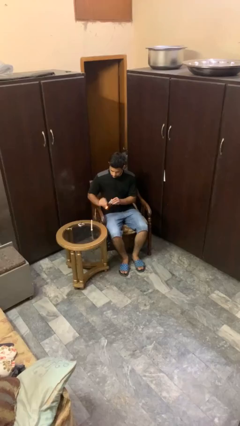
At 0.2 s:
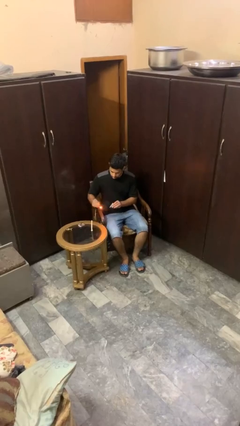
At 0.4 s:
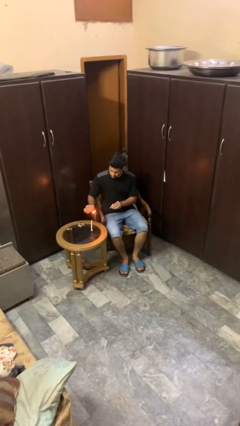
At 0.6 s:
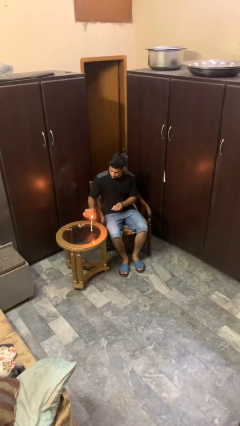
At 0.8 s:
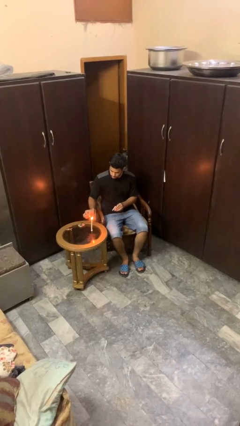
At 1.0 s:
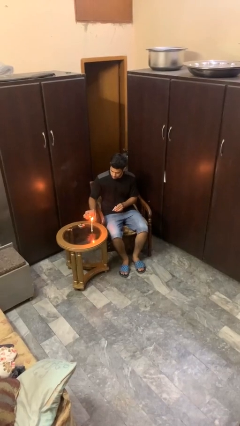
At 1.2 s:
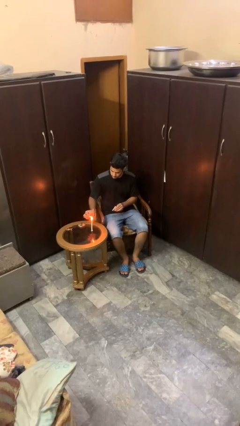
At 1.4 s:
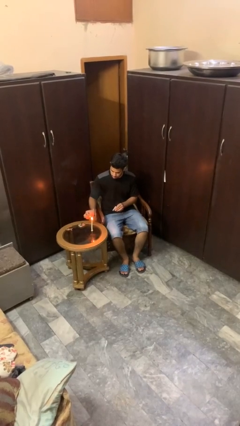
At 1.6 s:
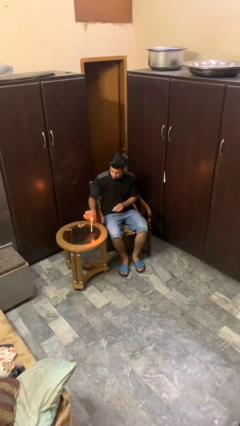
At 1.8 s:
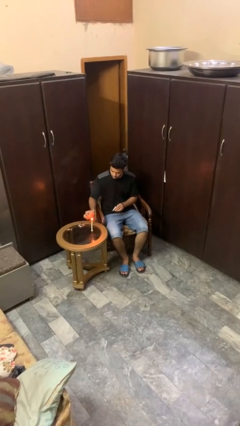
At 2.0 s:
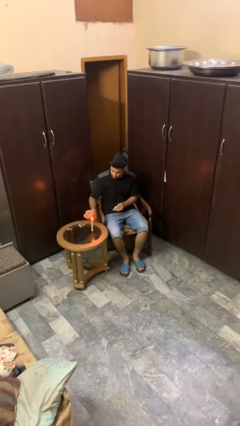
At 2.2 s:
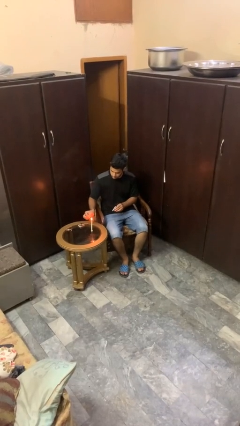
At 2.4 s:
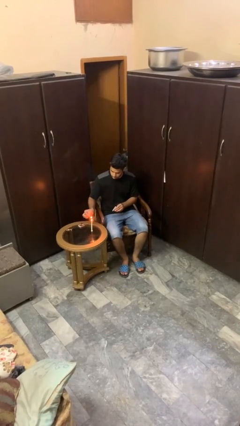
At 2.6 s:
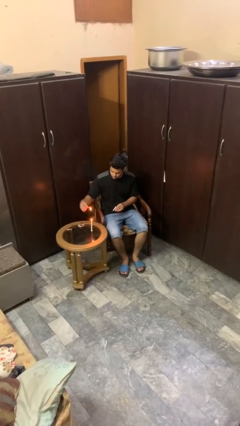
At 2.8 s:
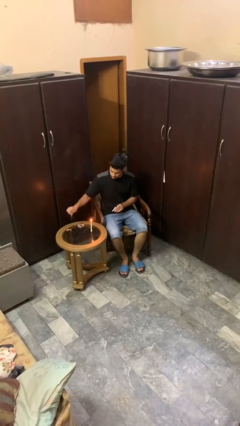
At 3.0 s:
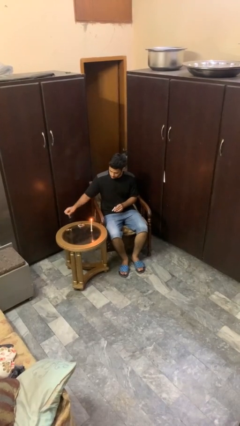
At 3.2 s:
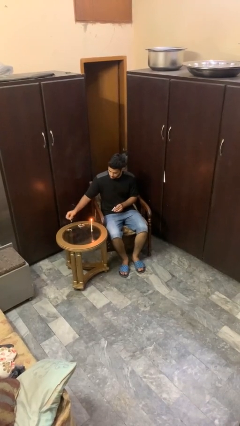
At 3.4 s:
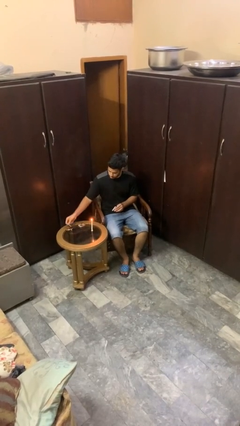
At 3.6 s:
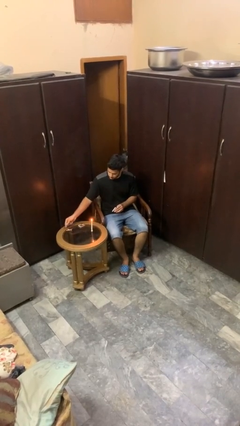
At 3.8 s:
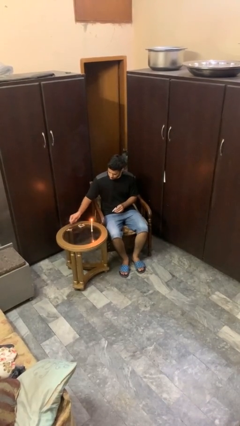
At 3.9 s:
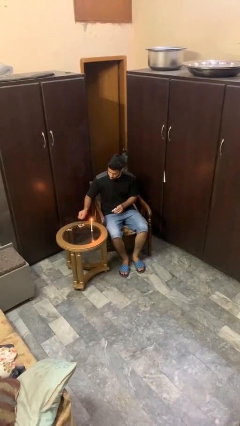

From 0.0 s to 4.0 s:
person lights candle

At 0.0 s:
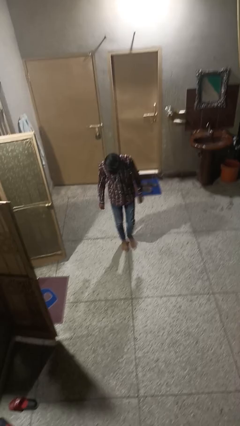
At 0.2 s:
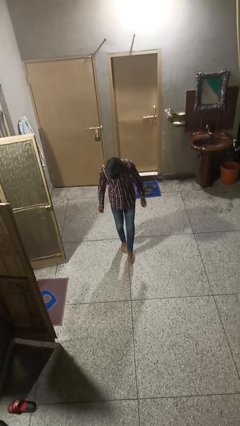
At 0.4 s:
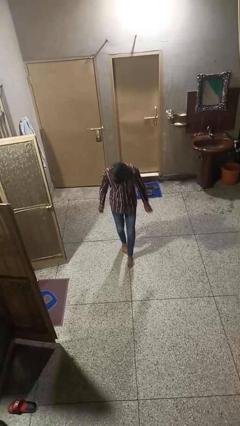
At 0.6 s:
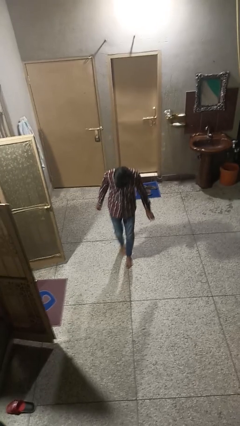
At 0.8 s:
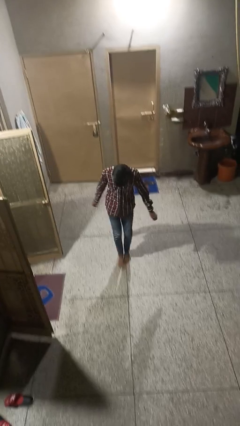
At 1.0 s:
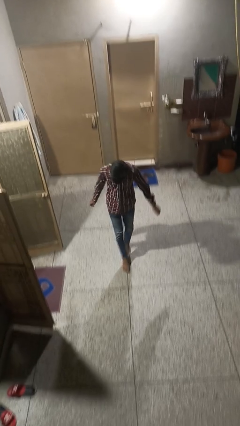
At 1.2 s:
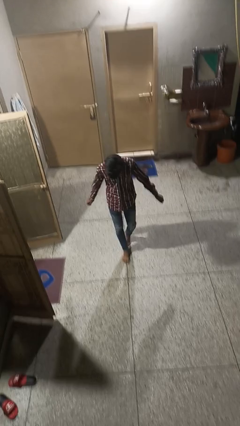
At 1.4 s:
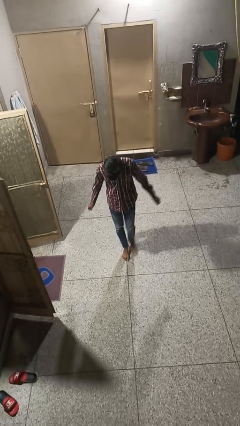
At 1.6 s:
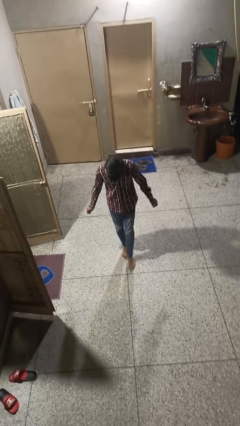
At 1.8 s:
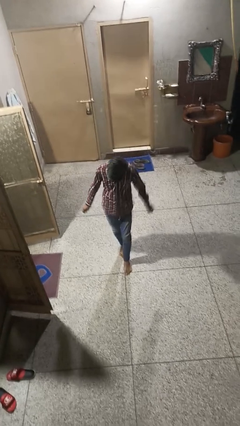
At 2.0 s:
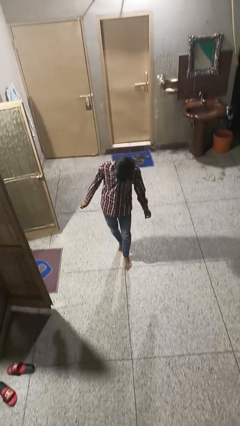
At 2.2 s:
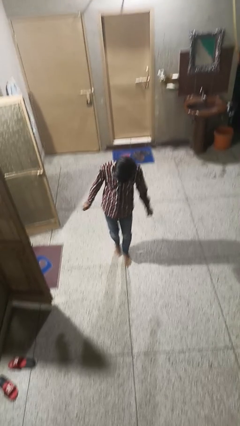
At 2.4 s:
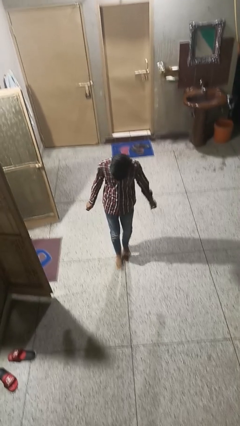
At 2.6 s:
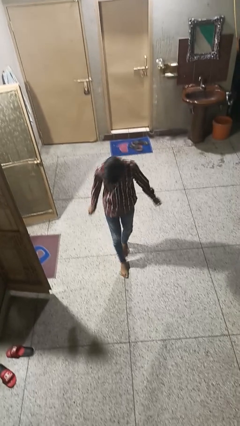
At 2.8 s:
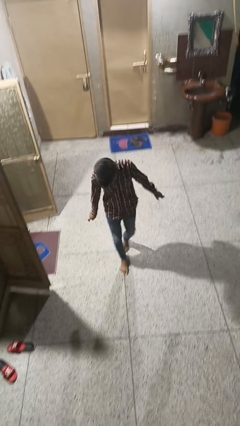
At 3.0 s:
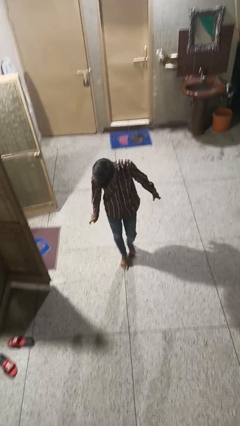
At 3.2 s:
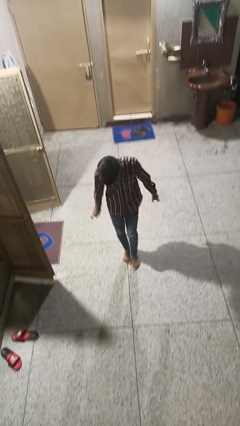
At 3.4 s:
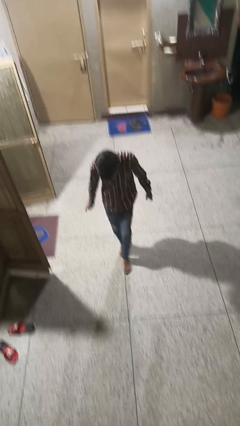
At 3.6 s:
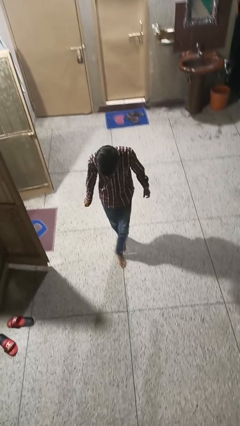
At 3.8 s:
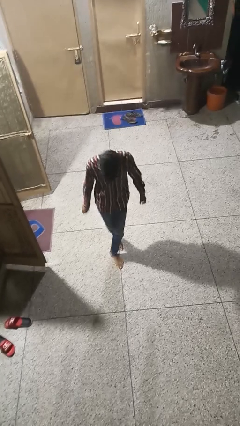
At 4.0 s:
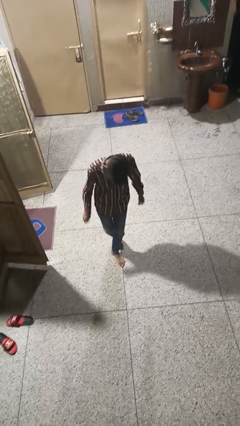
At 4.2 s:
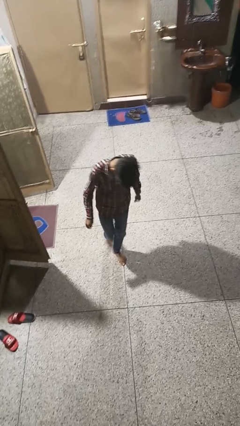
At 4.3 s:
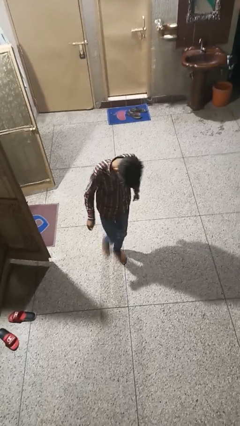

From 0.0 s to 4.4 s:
person walks tiptoe

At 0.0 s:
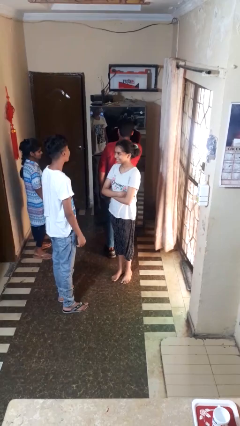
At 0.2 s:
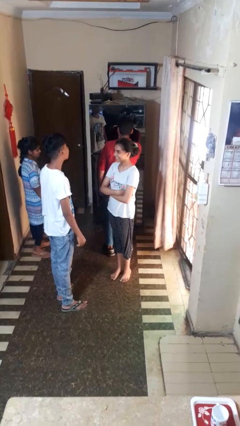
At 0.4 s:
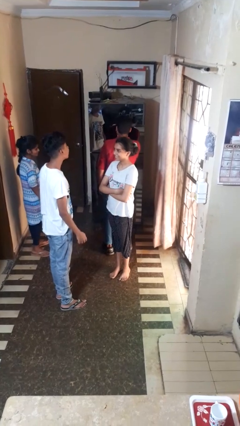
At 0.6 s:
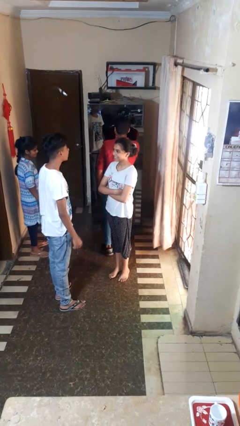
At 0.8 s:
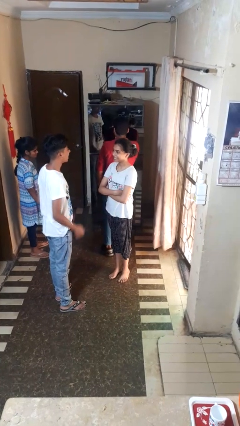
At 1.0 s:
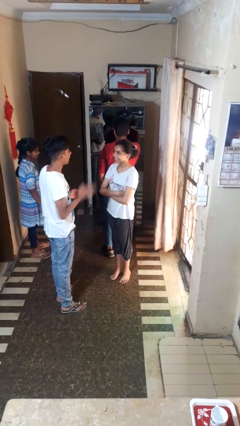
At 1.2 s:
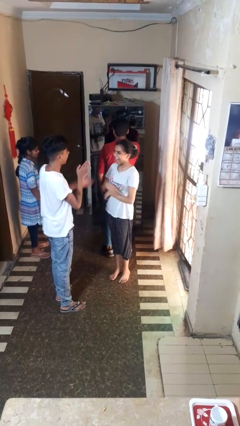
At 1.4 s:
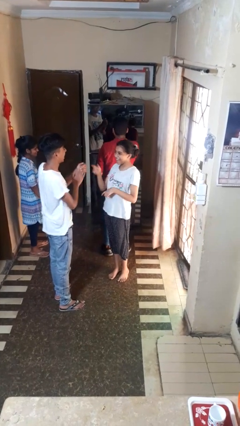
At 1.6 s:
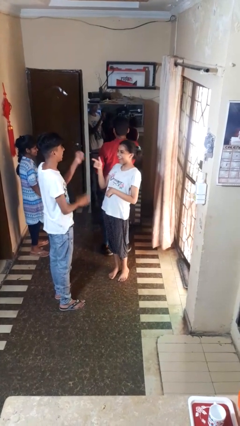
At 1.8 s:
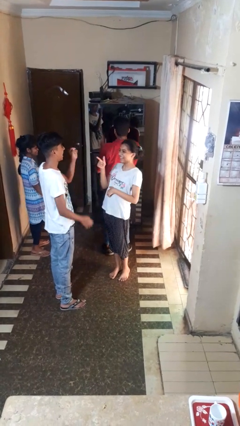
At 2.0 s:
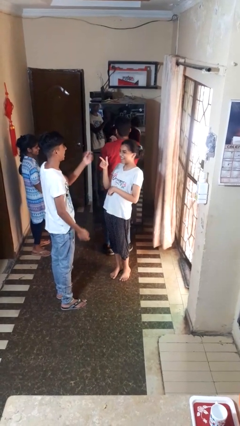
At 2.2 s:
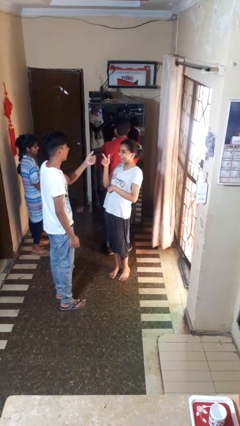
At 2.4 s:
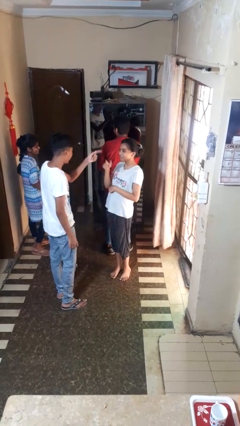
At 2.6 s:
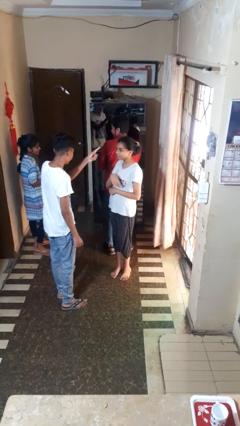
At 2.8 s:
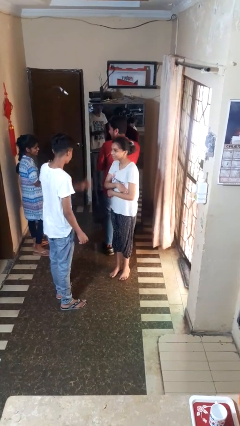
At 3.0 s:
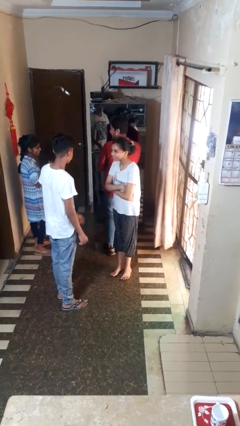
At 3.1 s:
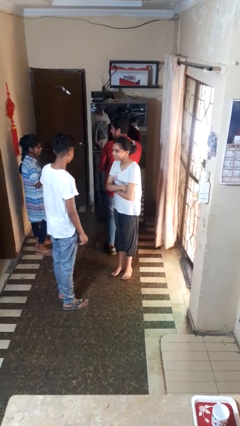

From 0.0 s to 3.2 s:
person laughs with person

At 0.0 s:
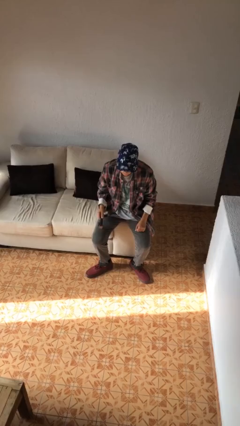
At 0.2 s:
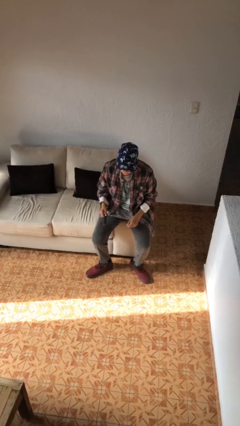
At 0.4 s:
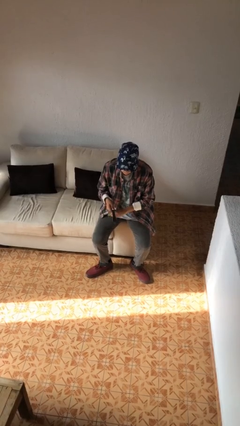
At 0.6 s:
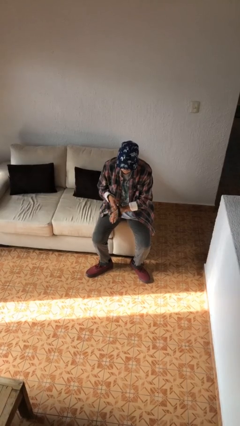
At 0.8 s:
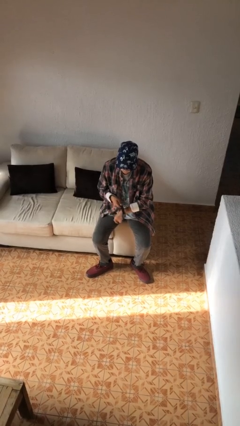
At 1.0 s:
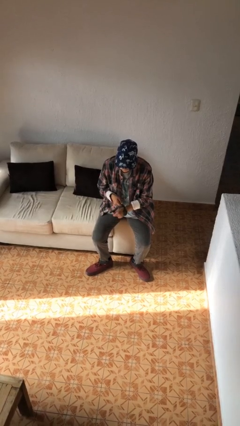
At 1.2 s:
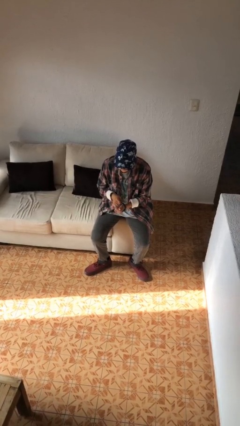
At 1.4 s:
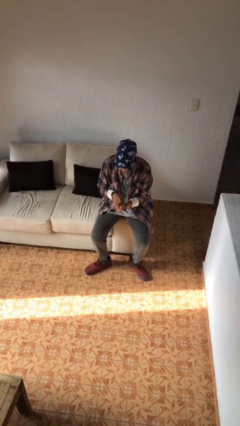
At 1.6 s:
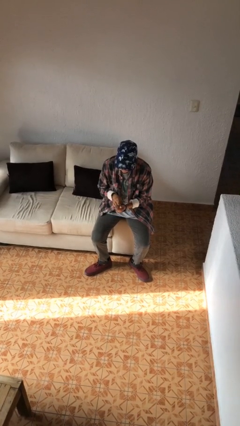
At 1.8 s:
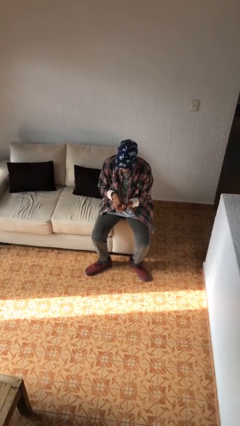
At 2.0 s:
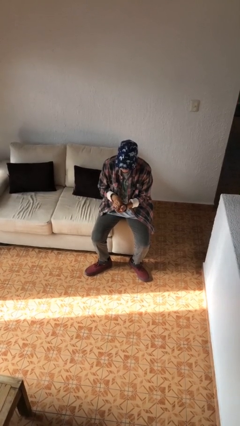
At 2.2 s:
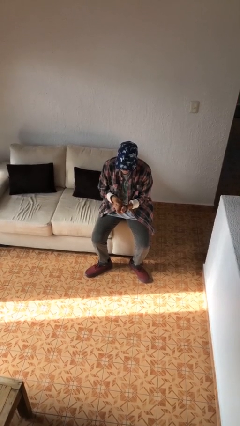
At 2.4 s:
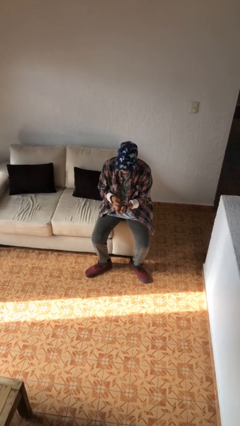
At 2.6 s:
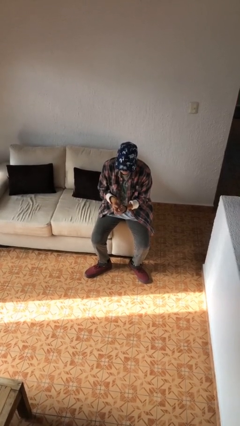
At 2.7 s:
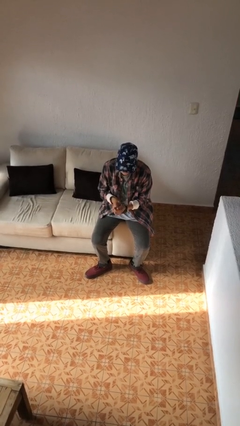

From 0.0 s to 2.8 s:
person puts on wristwatch

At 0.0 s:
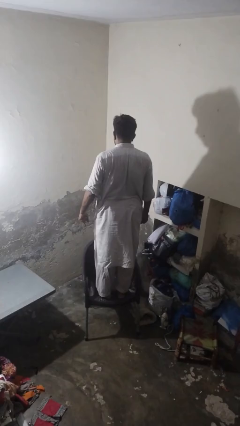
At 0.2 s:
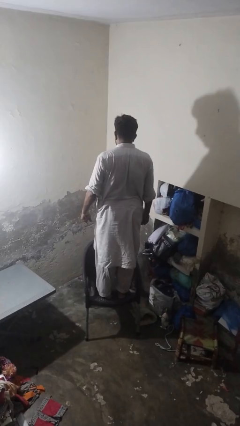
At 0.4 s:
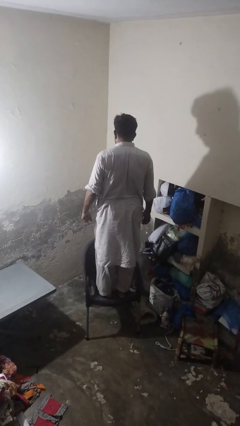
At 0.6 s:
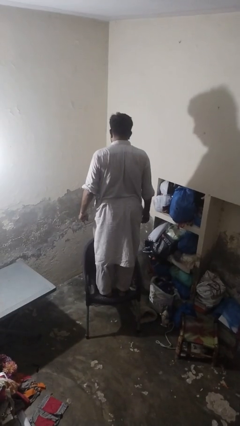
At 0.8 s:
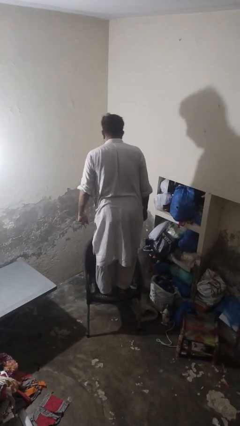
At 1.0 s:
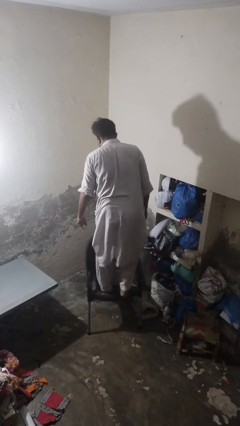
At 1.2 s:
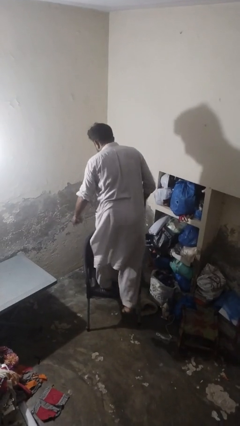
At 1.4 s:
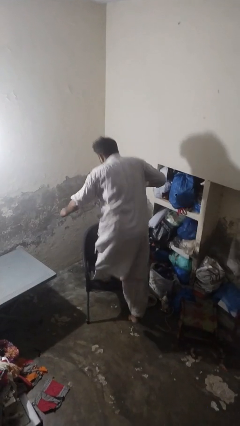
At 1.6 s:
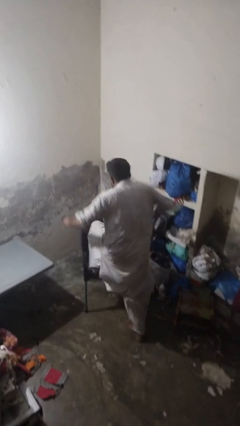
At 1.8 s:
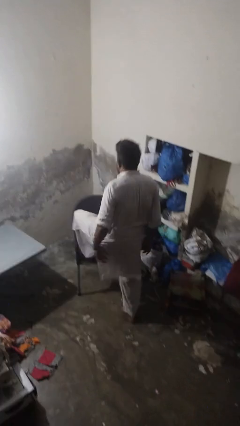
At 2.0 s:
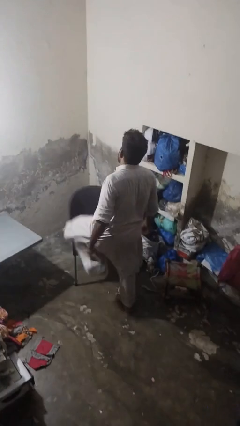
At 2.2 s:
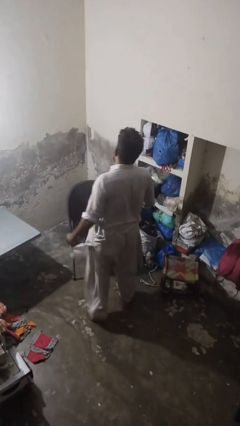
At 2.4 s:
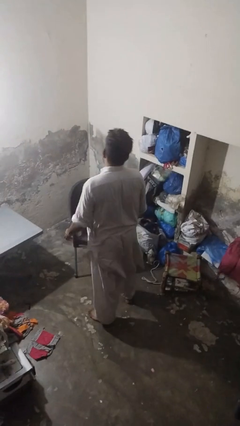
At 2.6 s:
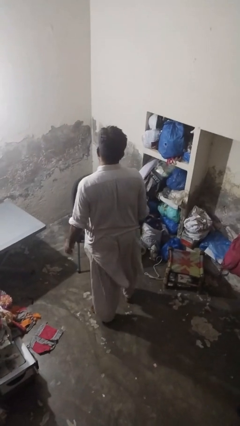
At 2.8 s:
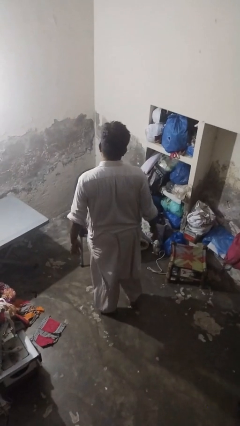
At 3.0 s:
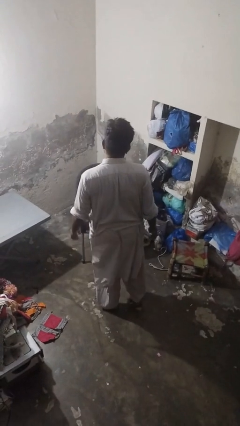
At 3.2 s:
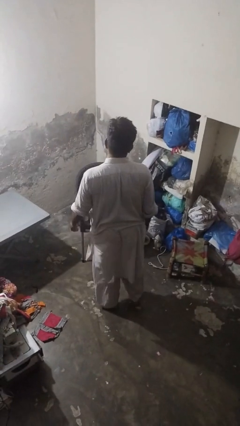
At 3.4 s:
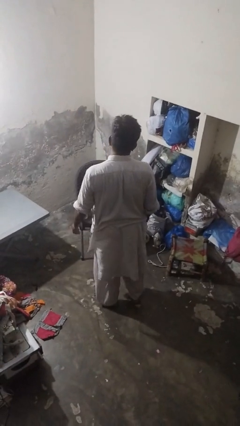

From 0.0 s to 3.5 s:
person climbs off chair
